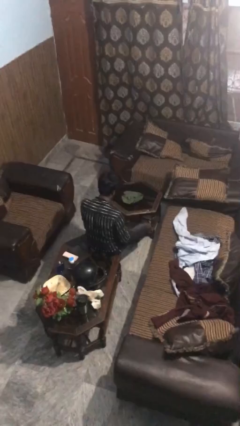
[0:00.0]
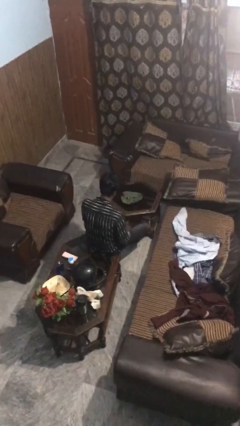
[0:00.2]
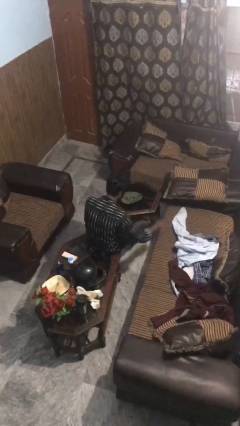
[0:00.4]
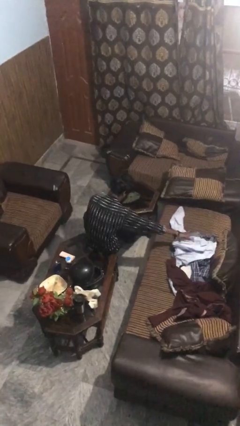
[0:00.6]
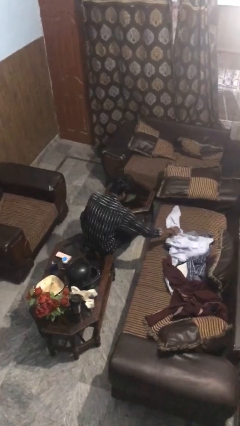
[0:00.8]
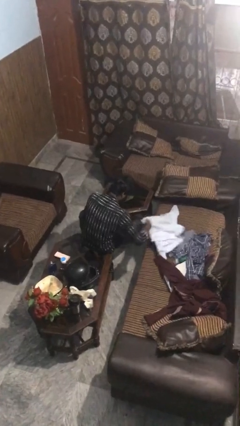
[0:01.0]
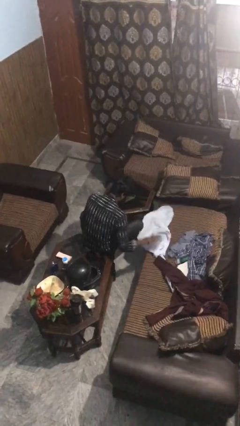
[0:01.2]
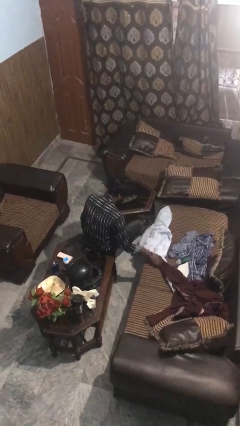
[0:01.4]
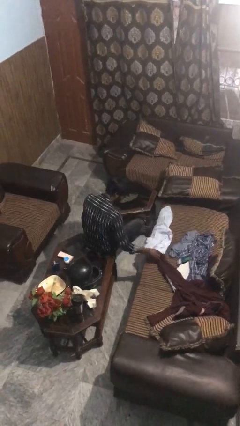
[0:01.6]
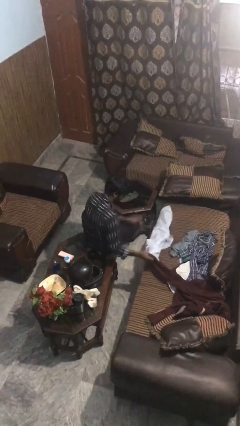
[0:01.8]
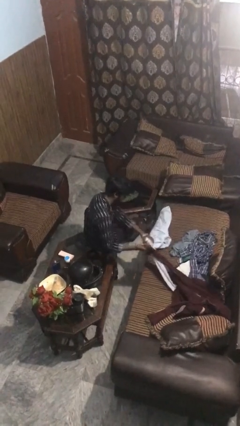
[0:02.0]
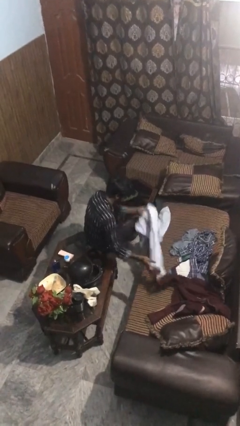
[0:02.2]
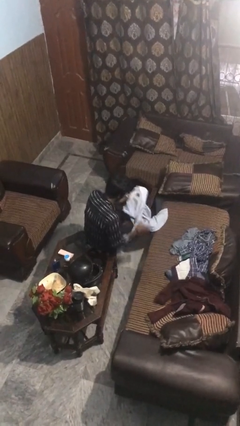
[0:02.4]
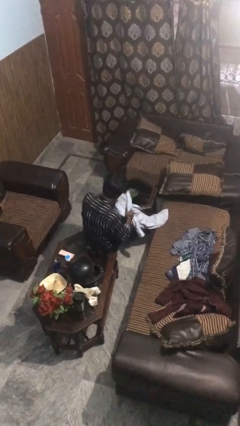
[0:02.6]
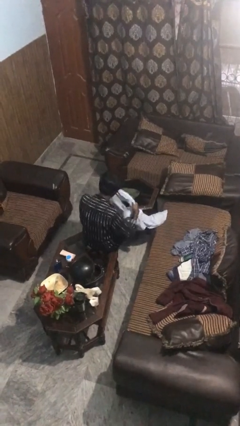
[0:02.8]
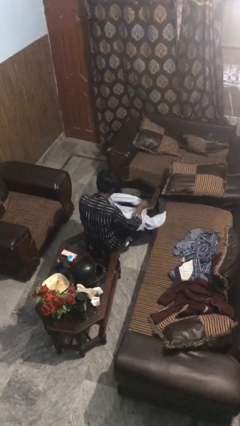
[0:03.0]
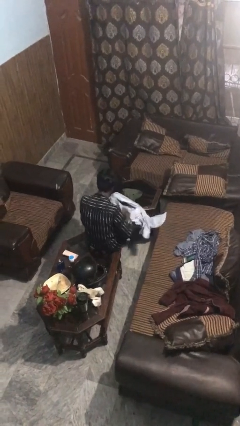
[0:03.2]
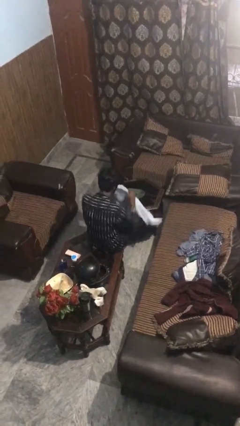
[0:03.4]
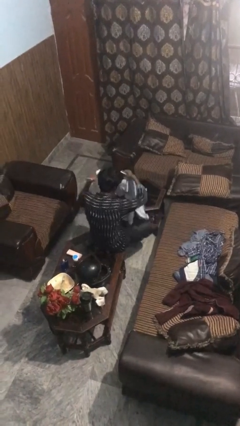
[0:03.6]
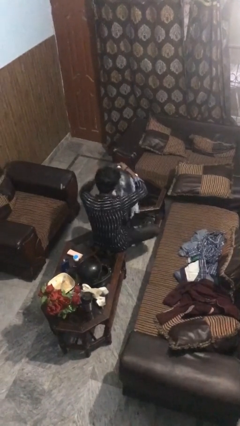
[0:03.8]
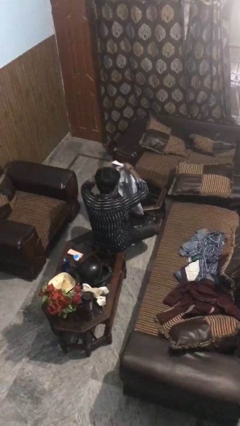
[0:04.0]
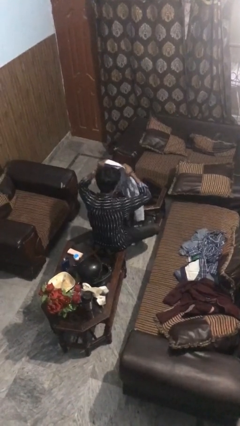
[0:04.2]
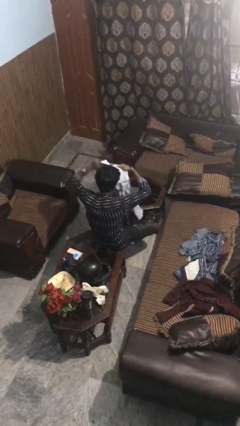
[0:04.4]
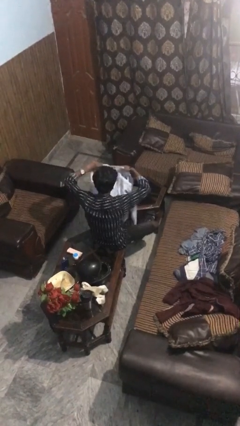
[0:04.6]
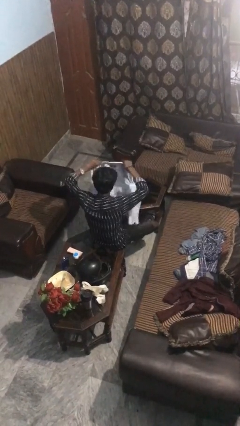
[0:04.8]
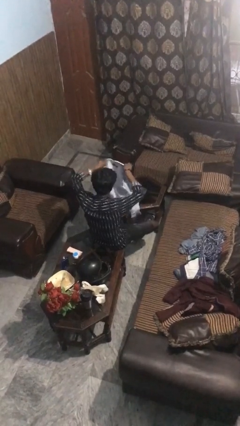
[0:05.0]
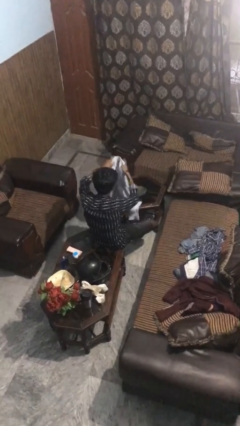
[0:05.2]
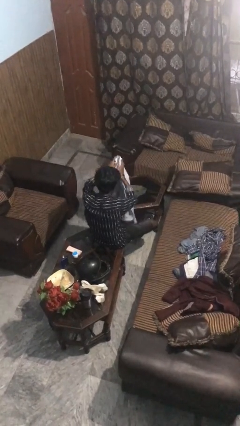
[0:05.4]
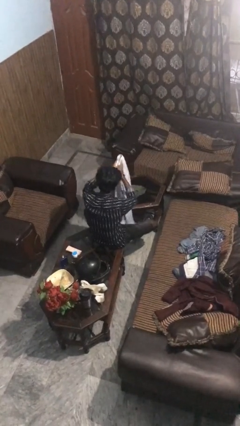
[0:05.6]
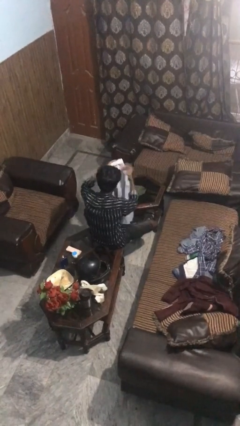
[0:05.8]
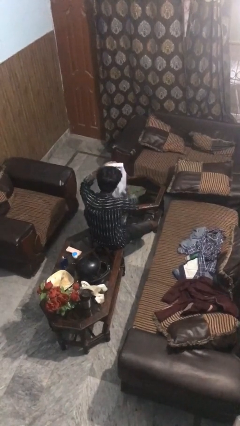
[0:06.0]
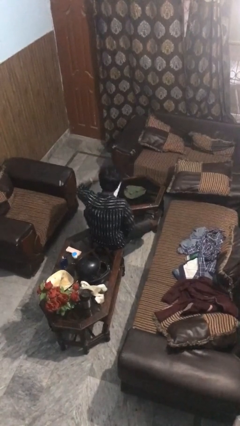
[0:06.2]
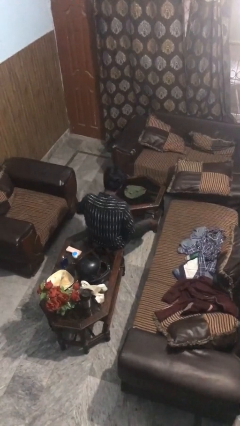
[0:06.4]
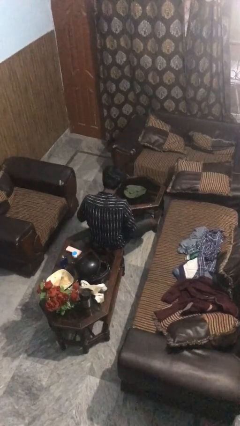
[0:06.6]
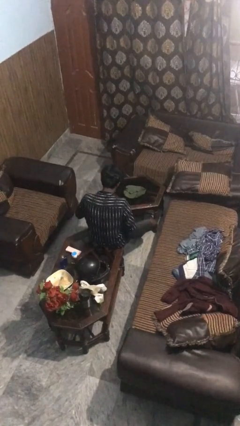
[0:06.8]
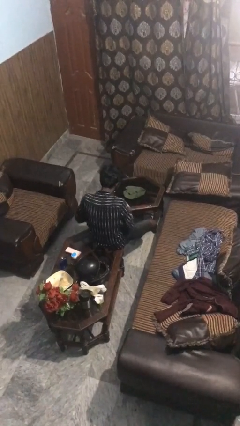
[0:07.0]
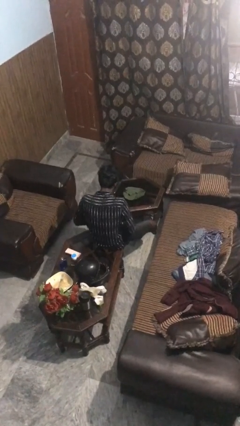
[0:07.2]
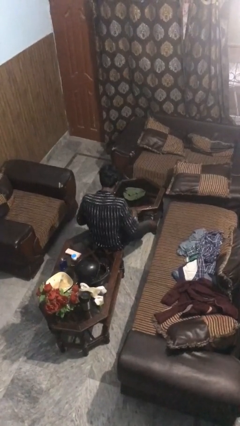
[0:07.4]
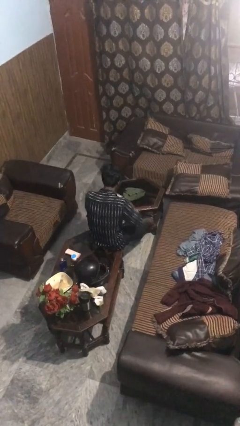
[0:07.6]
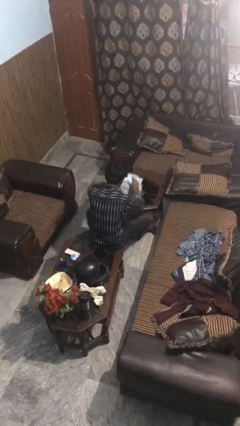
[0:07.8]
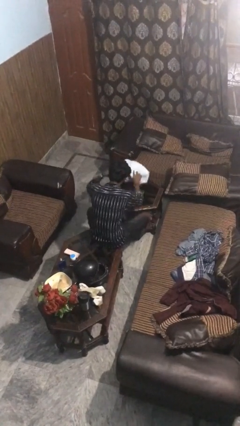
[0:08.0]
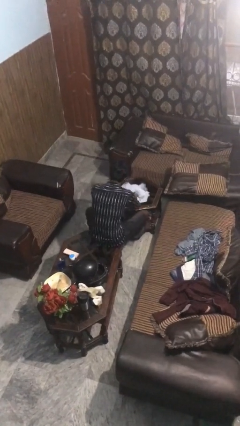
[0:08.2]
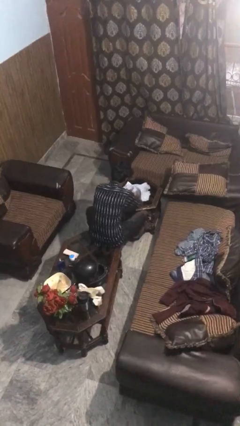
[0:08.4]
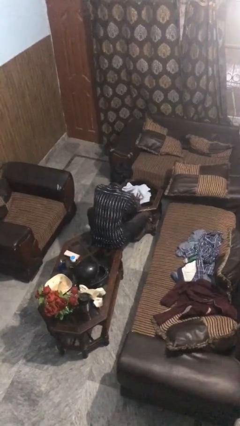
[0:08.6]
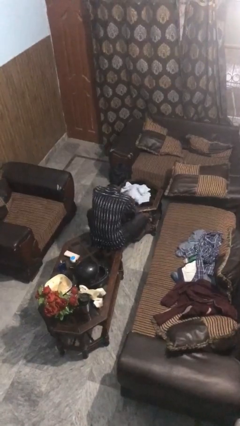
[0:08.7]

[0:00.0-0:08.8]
person folds shirt

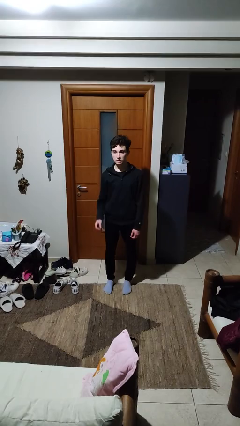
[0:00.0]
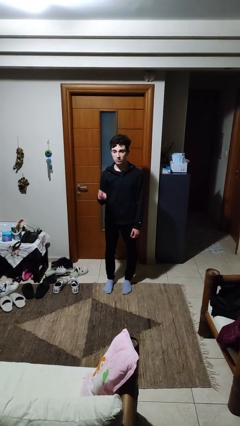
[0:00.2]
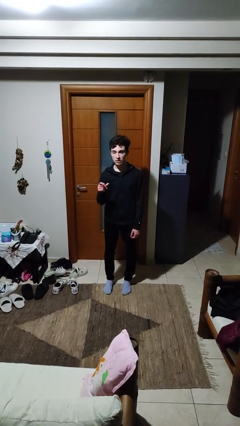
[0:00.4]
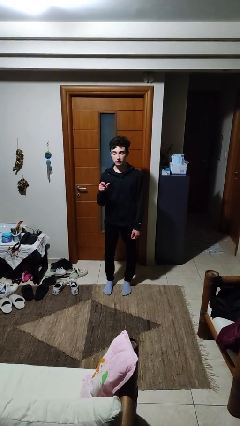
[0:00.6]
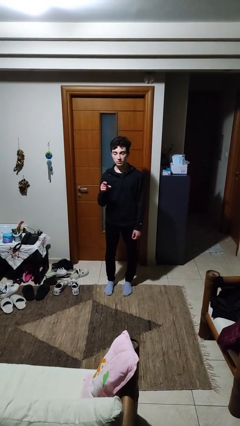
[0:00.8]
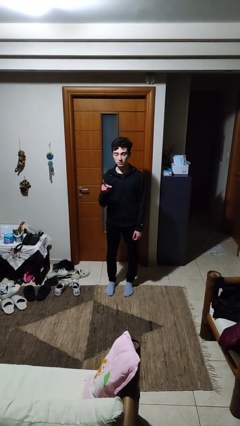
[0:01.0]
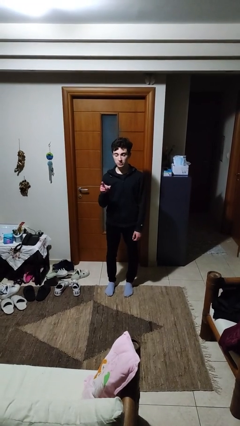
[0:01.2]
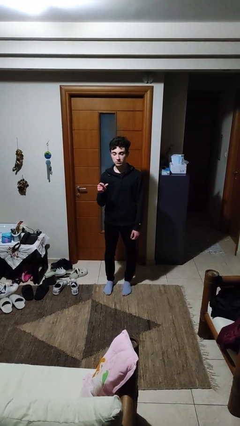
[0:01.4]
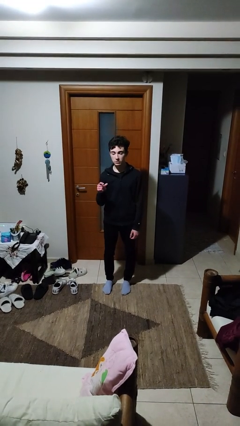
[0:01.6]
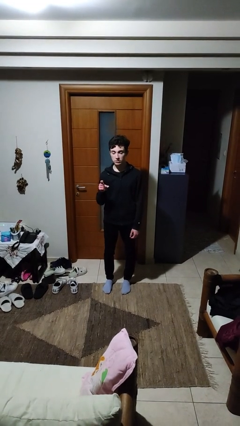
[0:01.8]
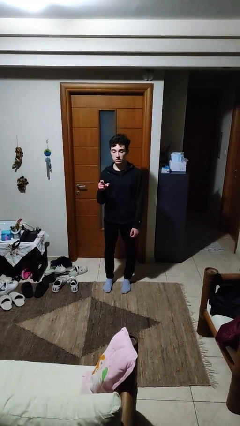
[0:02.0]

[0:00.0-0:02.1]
person snaps fingers

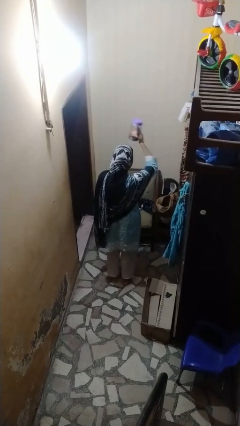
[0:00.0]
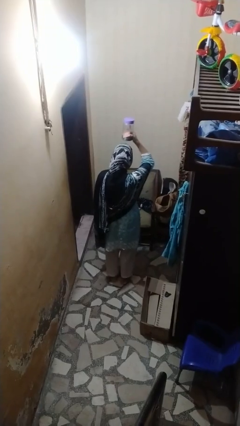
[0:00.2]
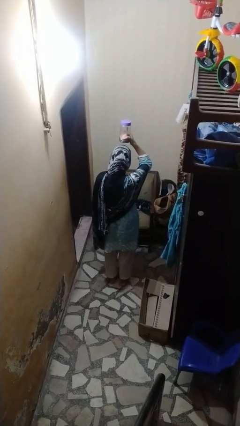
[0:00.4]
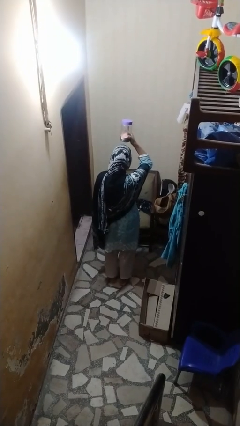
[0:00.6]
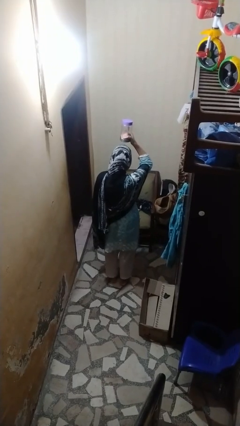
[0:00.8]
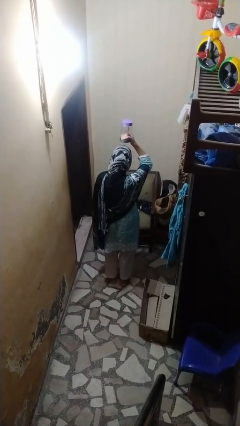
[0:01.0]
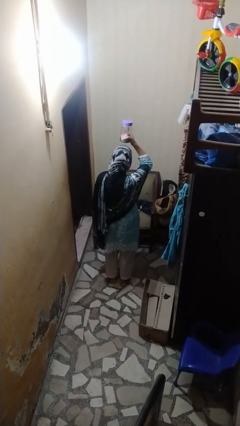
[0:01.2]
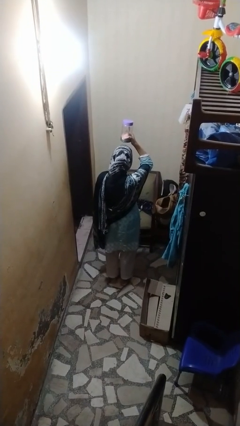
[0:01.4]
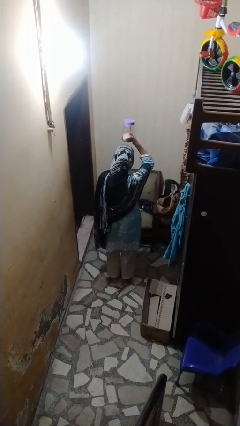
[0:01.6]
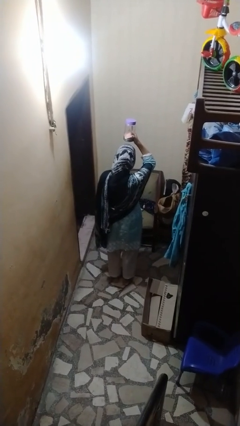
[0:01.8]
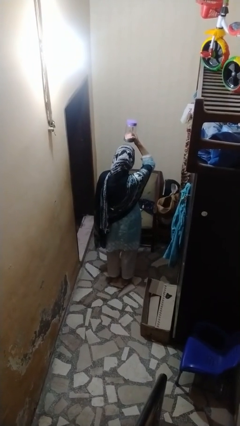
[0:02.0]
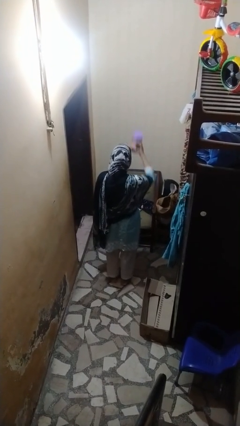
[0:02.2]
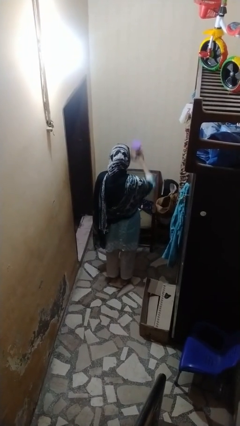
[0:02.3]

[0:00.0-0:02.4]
person holds object above head

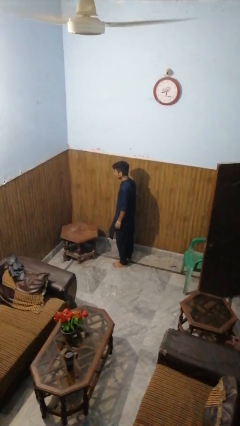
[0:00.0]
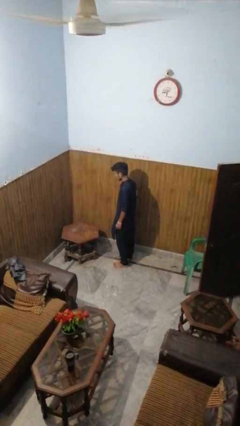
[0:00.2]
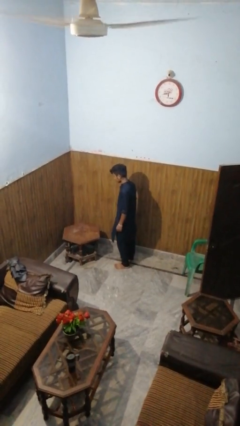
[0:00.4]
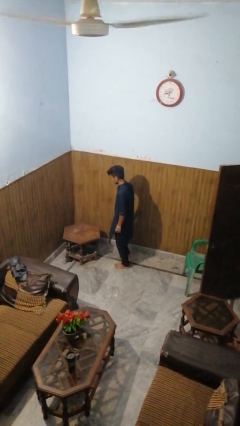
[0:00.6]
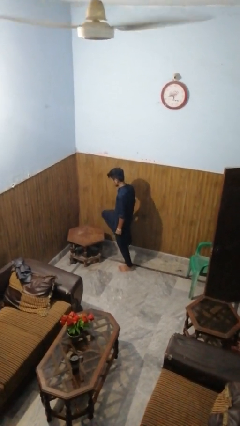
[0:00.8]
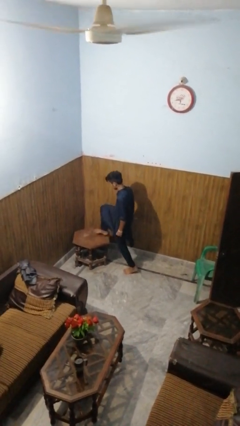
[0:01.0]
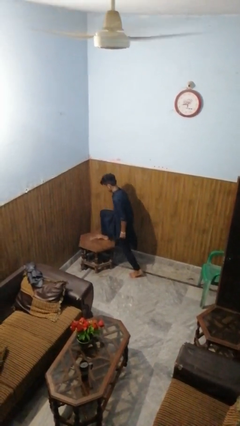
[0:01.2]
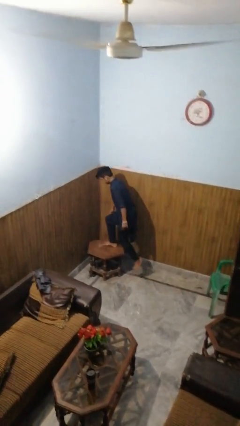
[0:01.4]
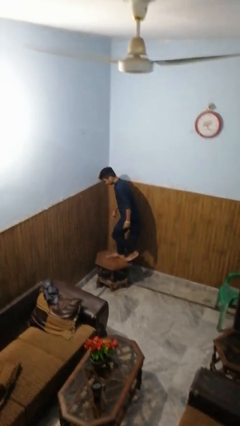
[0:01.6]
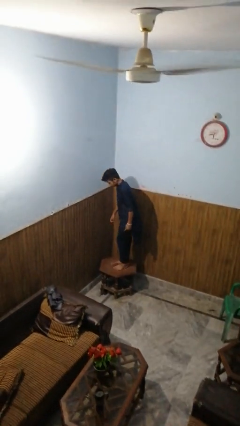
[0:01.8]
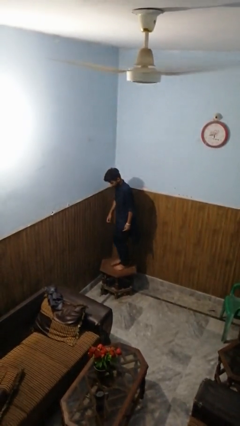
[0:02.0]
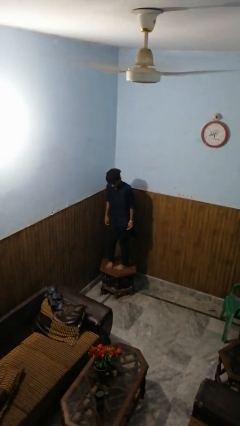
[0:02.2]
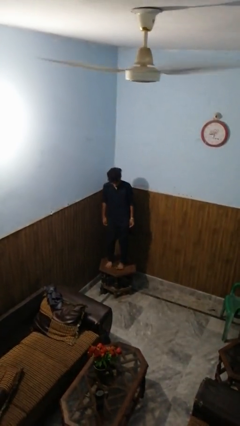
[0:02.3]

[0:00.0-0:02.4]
person climbs on table

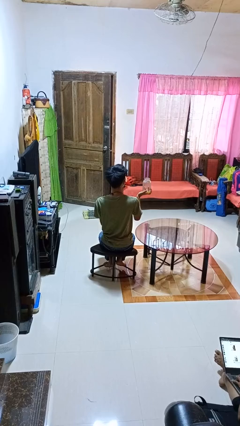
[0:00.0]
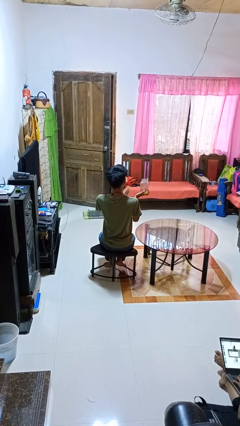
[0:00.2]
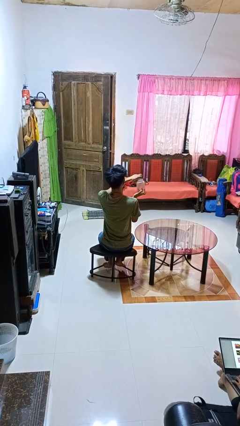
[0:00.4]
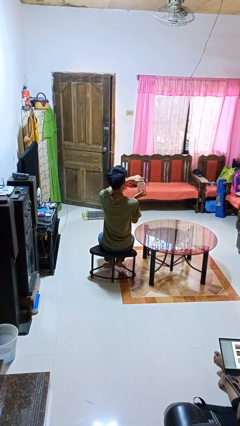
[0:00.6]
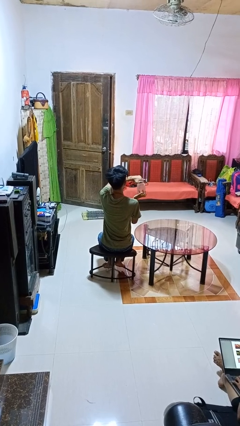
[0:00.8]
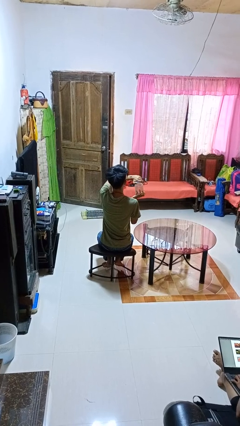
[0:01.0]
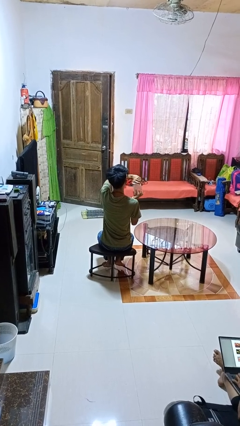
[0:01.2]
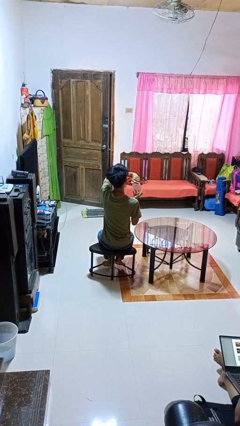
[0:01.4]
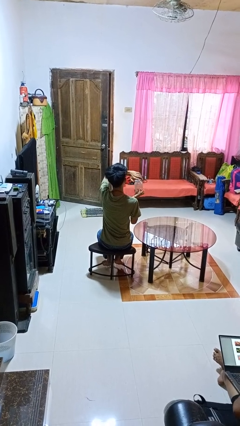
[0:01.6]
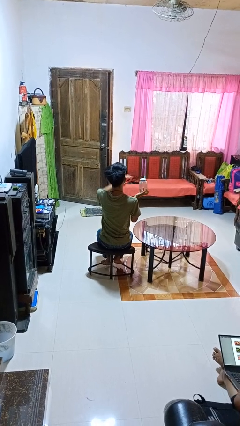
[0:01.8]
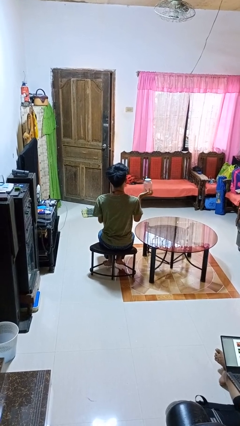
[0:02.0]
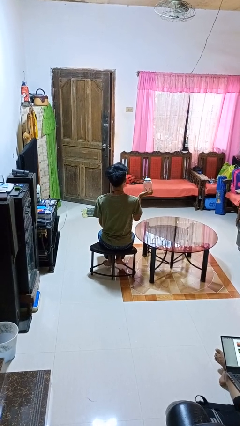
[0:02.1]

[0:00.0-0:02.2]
person closes jar
